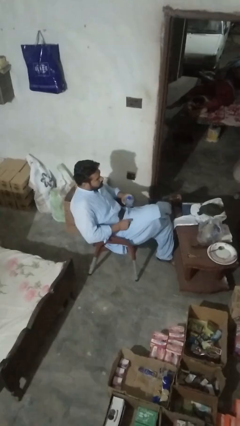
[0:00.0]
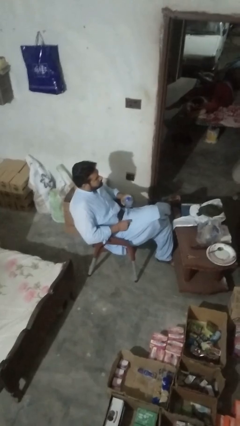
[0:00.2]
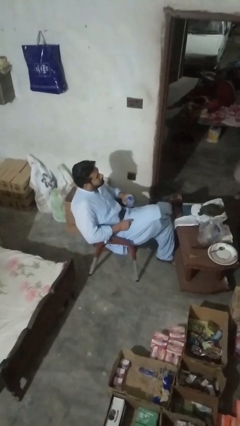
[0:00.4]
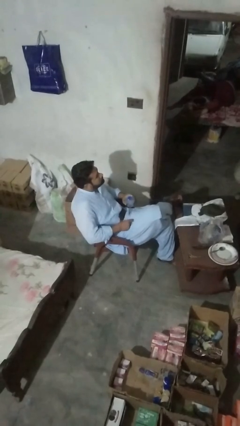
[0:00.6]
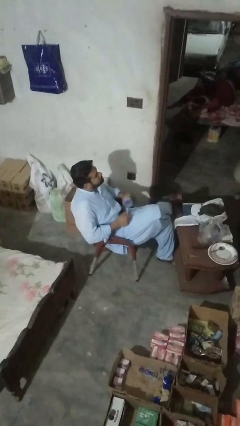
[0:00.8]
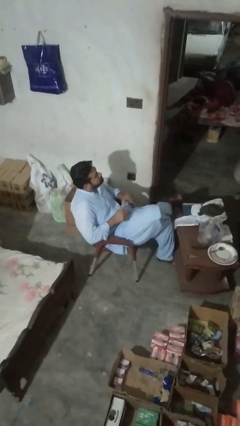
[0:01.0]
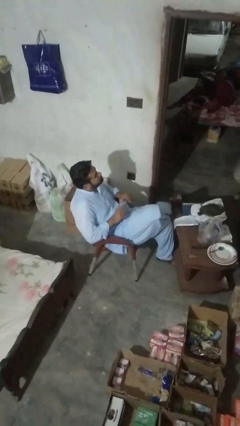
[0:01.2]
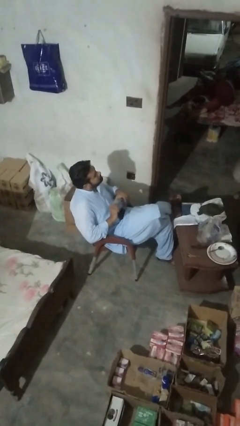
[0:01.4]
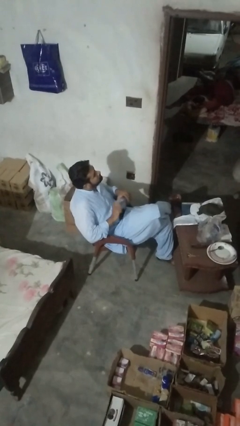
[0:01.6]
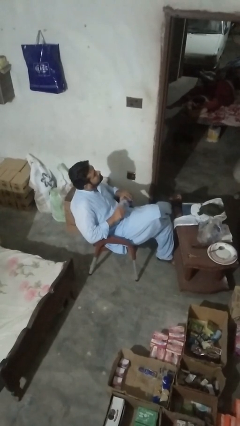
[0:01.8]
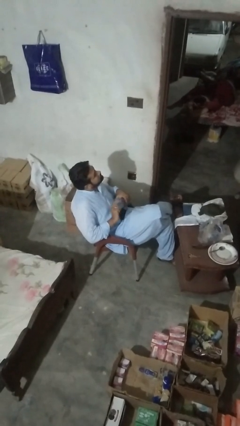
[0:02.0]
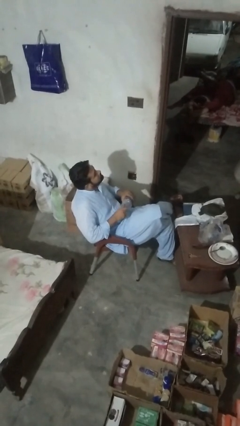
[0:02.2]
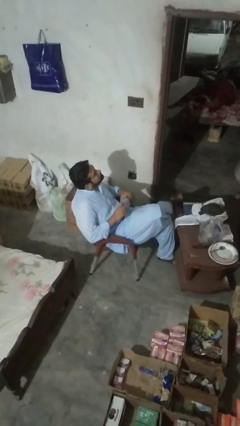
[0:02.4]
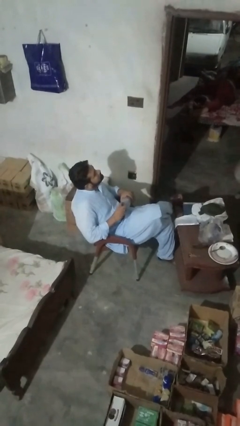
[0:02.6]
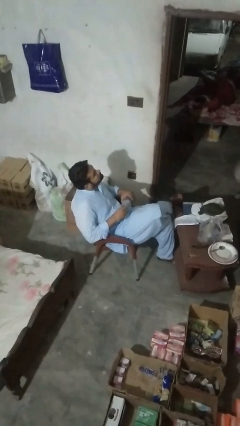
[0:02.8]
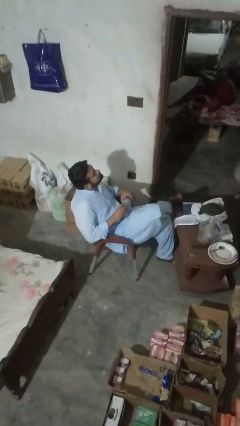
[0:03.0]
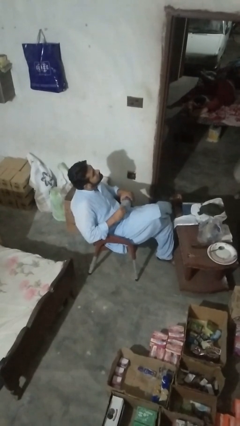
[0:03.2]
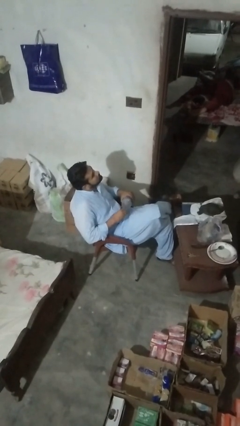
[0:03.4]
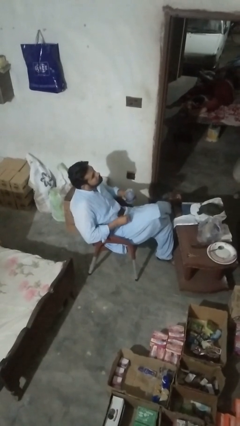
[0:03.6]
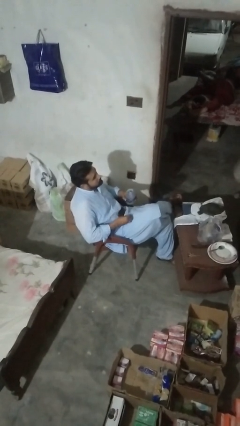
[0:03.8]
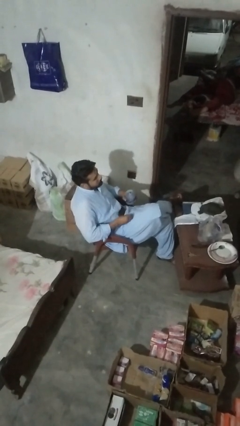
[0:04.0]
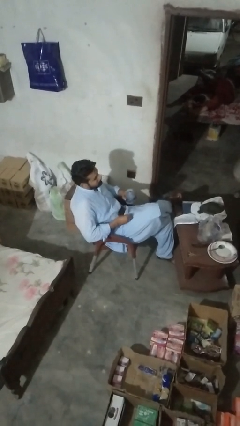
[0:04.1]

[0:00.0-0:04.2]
person unscrews lid from bottle

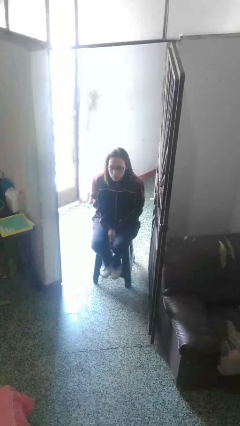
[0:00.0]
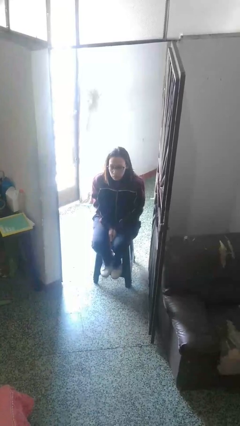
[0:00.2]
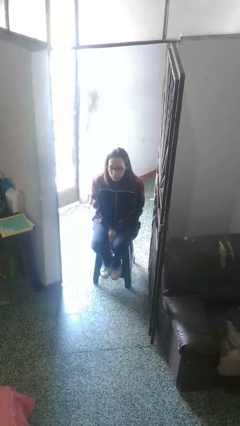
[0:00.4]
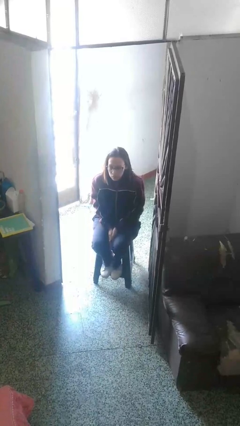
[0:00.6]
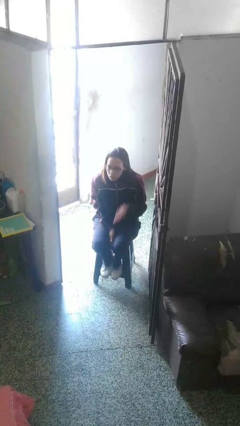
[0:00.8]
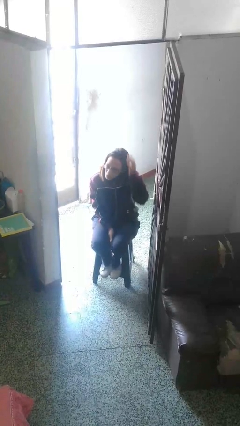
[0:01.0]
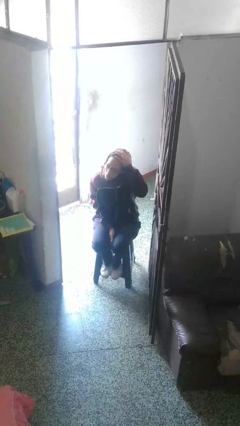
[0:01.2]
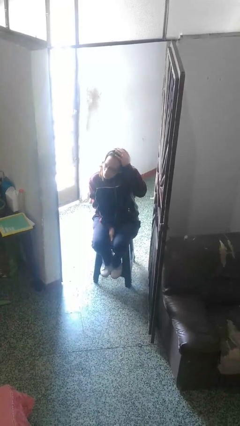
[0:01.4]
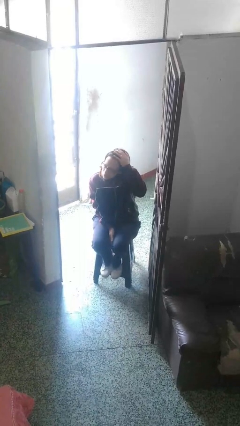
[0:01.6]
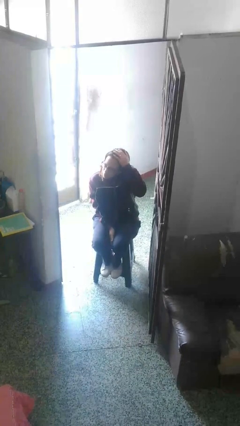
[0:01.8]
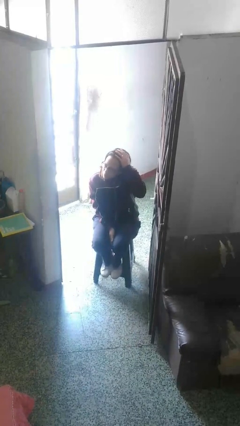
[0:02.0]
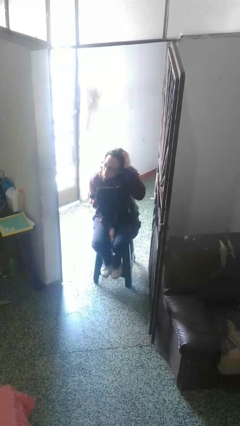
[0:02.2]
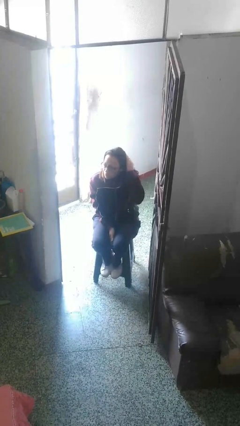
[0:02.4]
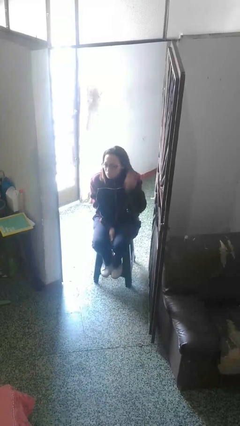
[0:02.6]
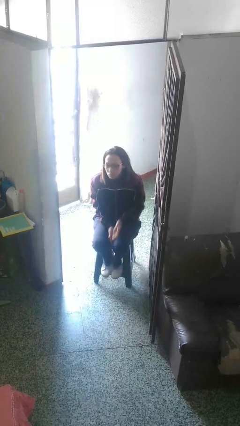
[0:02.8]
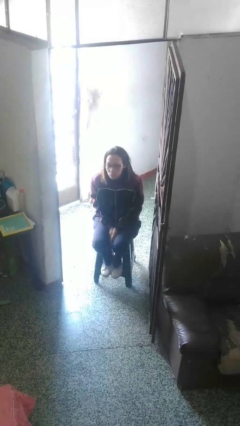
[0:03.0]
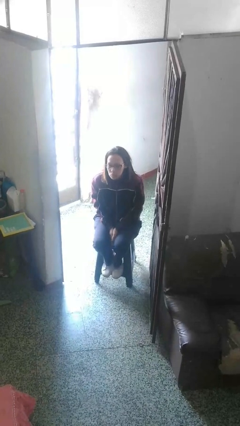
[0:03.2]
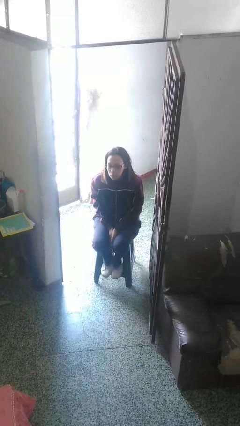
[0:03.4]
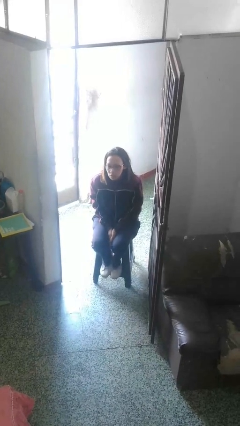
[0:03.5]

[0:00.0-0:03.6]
person pats head

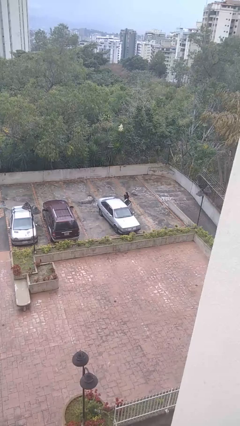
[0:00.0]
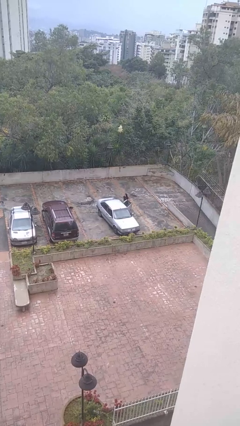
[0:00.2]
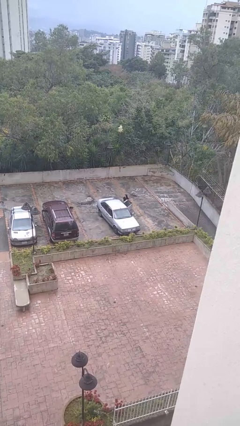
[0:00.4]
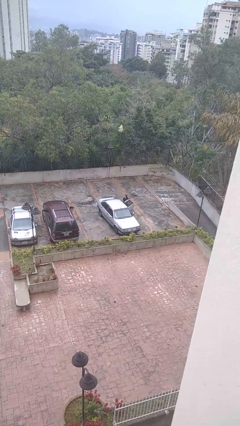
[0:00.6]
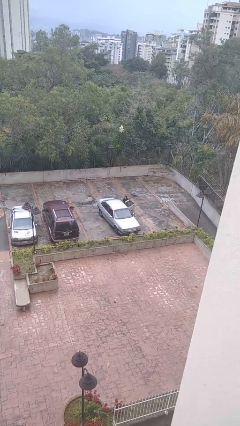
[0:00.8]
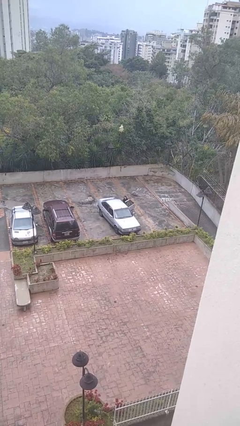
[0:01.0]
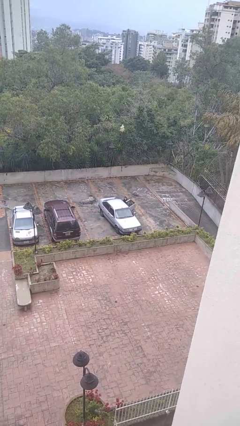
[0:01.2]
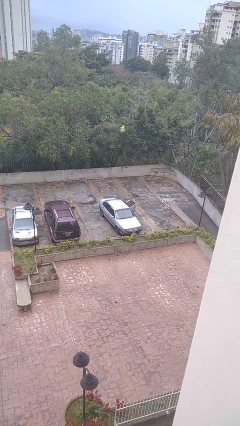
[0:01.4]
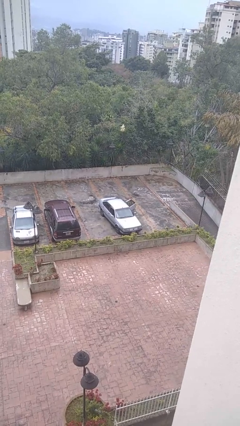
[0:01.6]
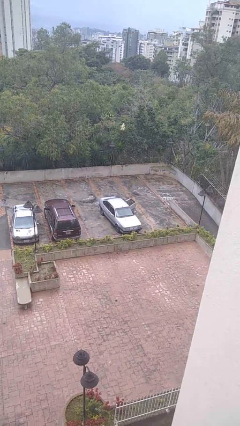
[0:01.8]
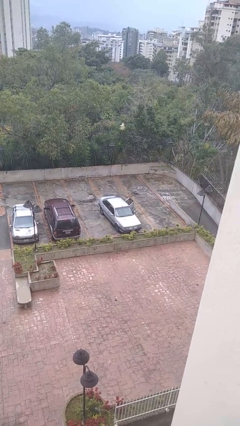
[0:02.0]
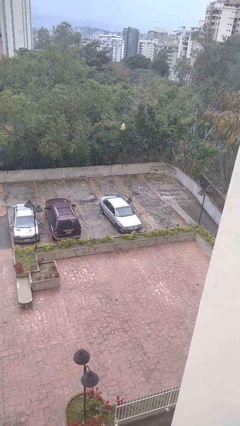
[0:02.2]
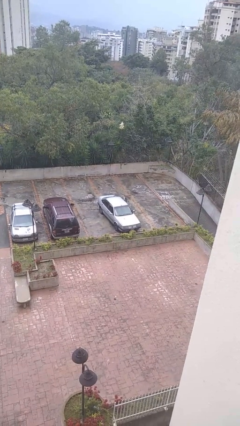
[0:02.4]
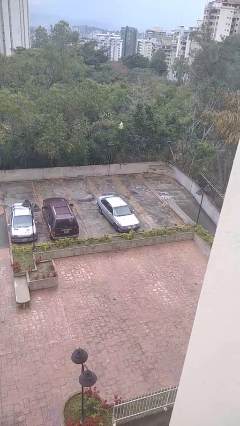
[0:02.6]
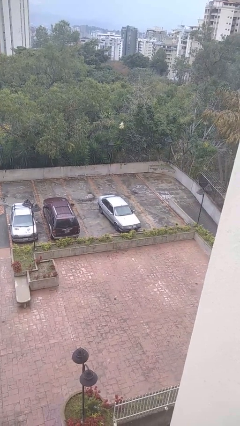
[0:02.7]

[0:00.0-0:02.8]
car picks up person

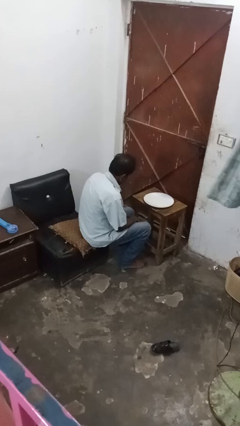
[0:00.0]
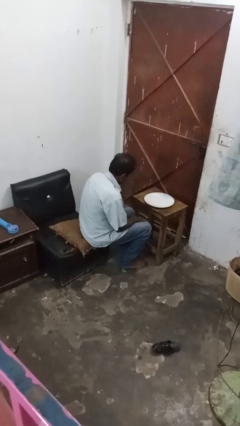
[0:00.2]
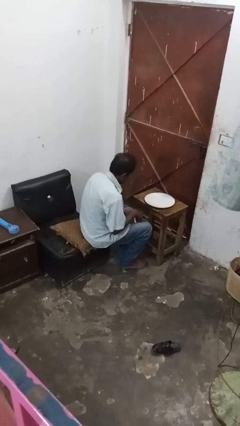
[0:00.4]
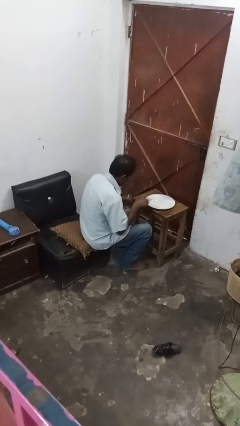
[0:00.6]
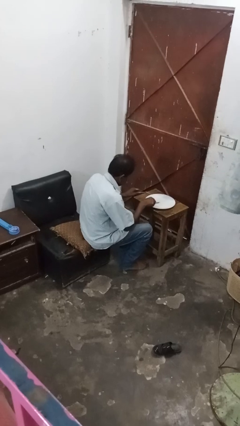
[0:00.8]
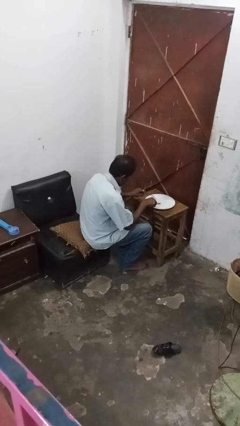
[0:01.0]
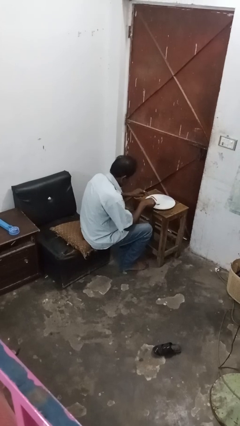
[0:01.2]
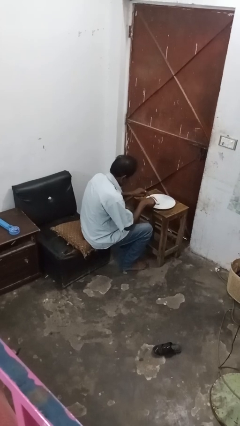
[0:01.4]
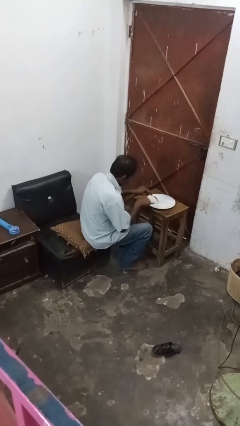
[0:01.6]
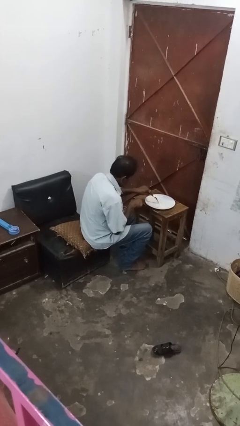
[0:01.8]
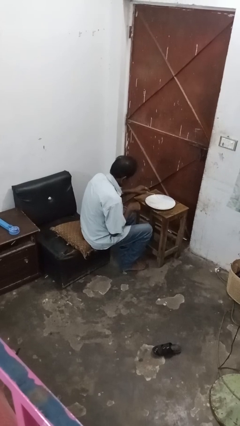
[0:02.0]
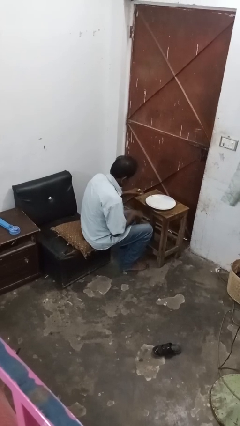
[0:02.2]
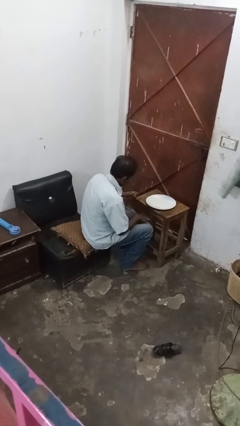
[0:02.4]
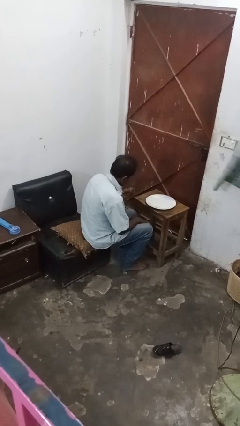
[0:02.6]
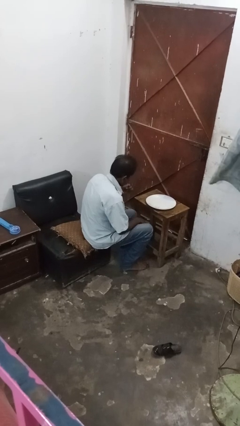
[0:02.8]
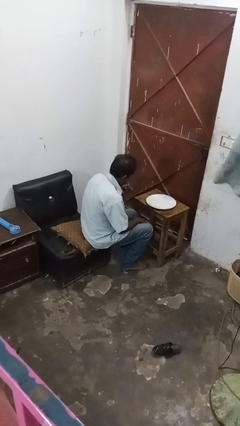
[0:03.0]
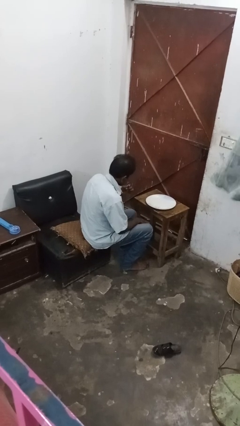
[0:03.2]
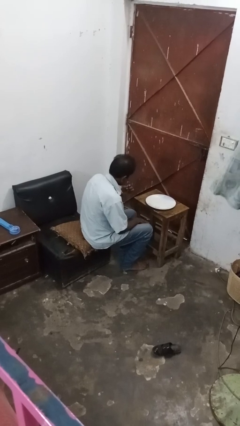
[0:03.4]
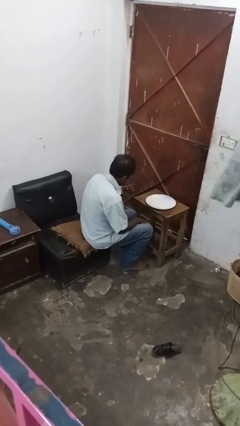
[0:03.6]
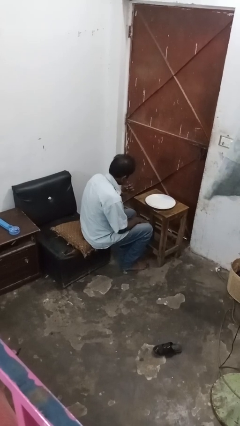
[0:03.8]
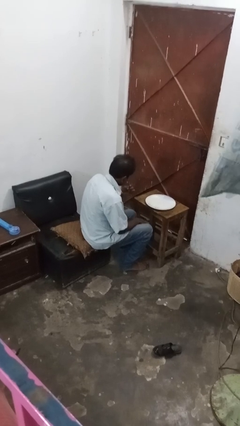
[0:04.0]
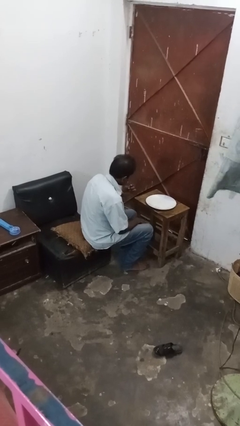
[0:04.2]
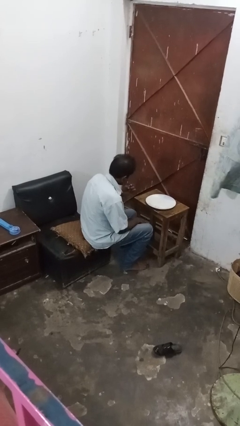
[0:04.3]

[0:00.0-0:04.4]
person eats with utensil

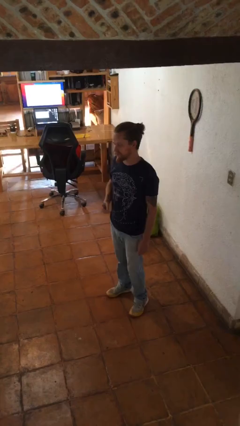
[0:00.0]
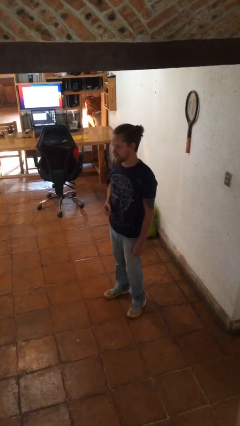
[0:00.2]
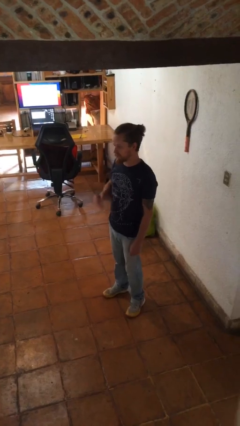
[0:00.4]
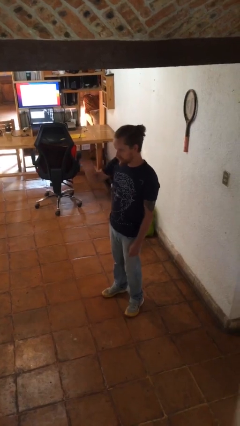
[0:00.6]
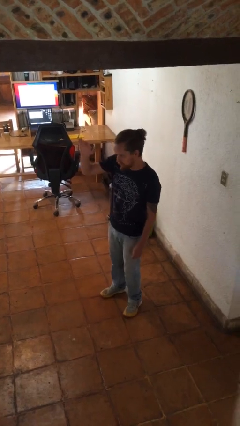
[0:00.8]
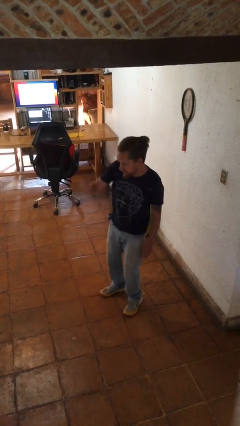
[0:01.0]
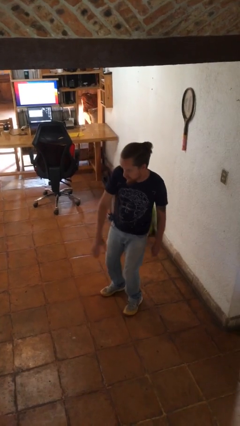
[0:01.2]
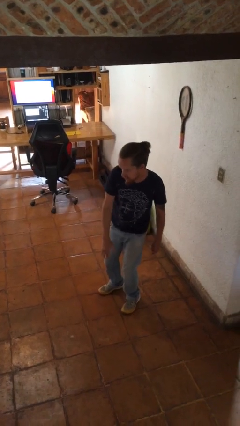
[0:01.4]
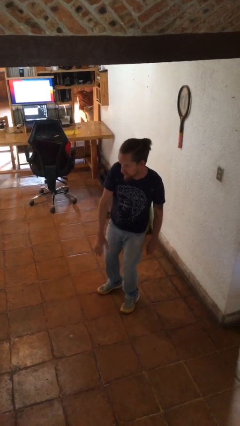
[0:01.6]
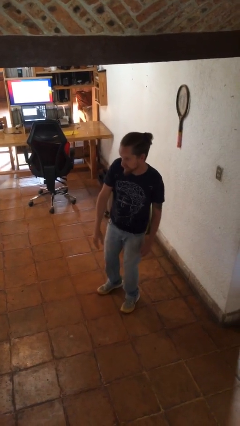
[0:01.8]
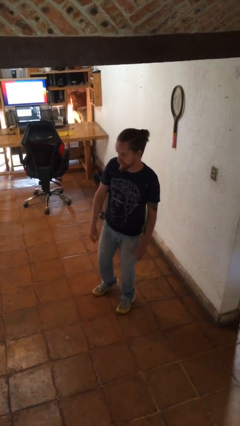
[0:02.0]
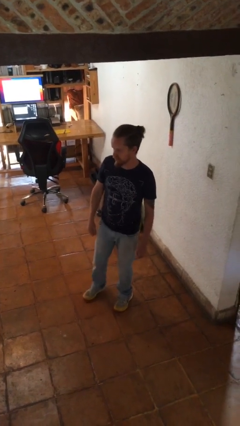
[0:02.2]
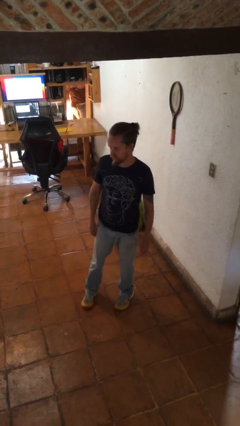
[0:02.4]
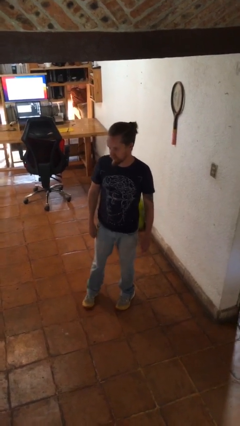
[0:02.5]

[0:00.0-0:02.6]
person gestures swipe down
